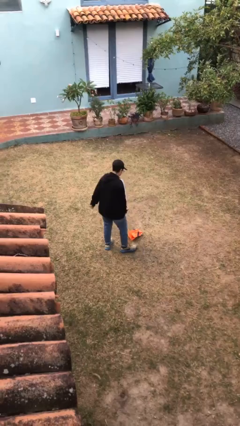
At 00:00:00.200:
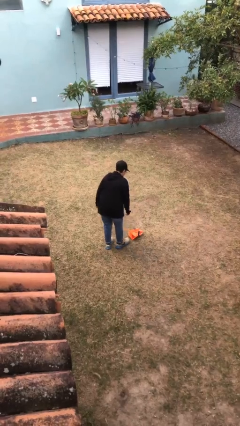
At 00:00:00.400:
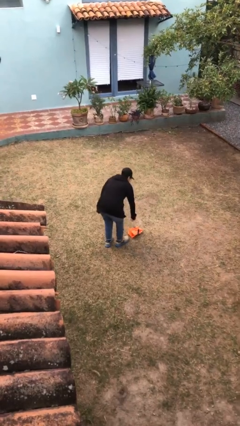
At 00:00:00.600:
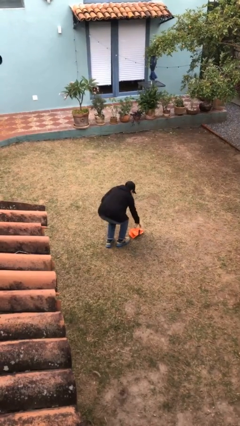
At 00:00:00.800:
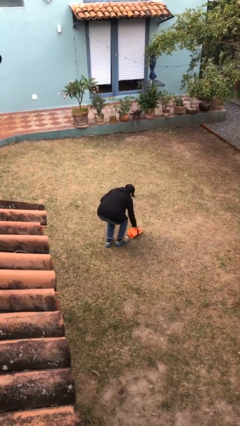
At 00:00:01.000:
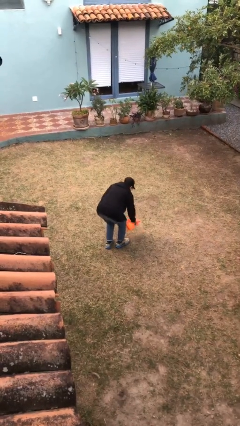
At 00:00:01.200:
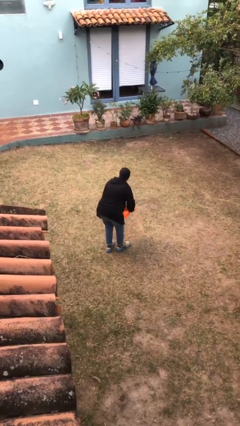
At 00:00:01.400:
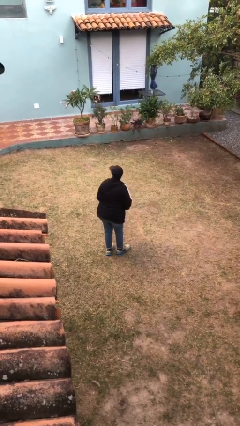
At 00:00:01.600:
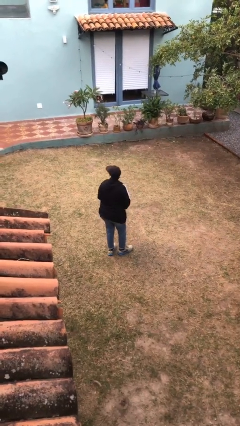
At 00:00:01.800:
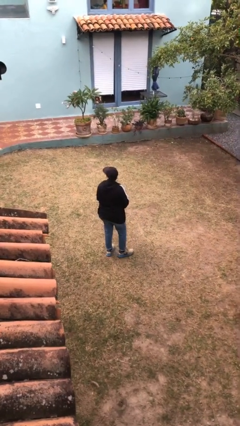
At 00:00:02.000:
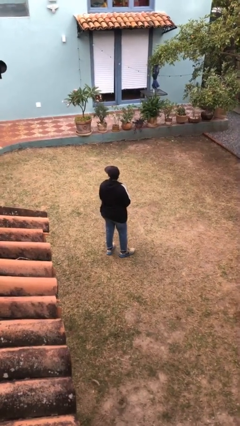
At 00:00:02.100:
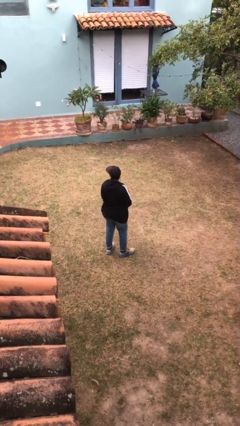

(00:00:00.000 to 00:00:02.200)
person picks up object from floor

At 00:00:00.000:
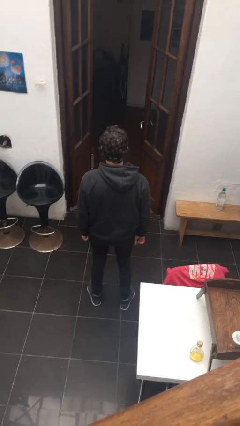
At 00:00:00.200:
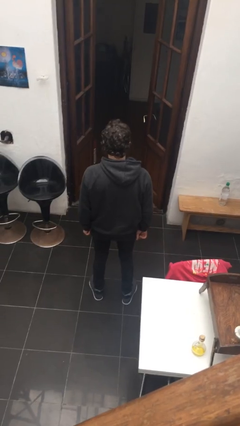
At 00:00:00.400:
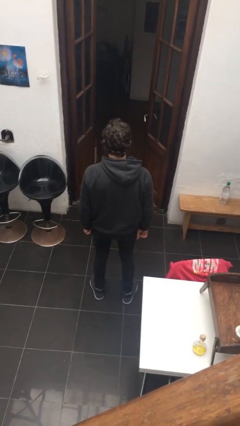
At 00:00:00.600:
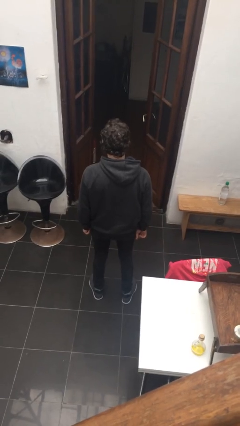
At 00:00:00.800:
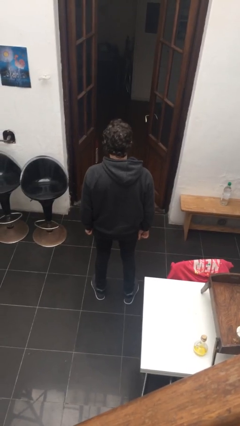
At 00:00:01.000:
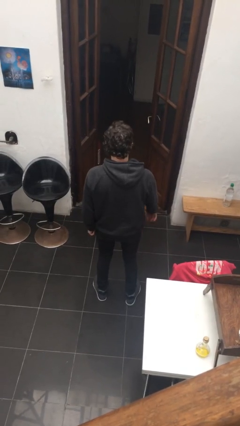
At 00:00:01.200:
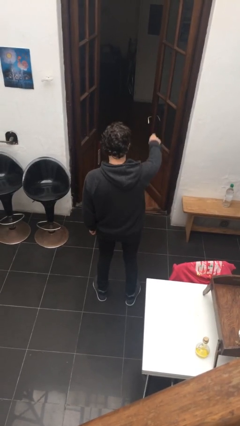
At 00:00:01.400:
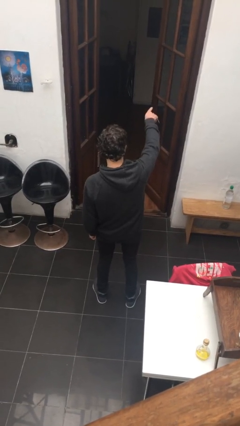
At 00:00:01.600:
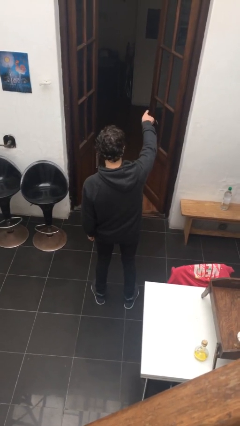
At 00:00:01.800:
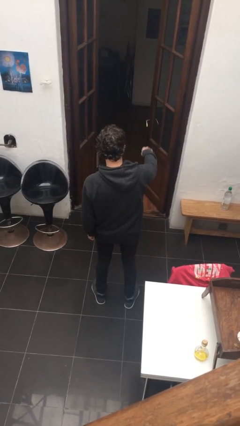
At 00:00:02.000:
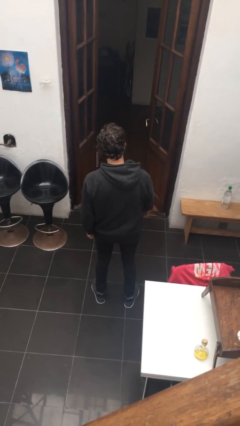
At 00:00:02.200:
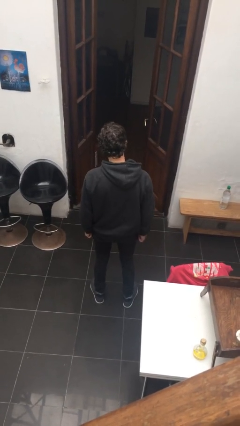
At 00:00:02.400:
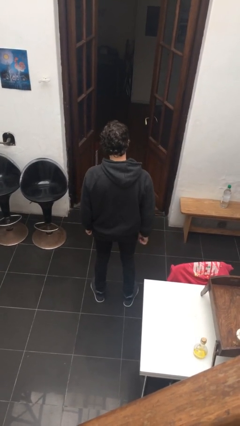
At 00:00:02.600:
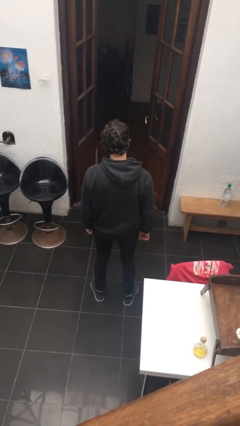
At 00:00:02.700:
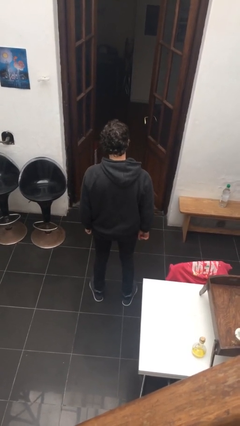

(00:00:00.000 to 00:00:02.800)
person points at person

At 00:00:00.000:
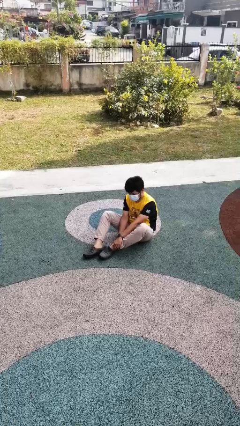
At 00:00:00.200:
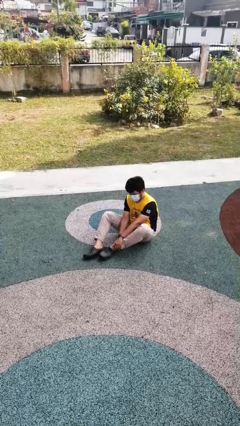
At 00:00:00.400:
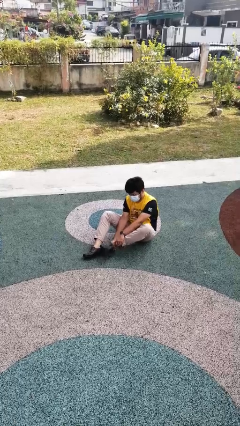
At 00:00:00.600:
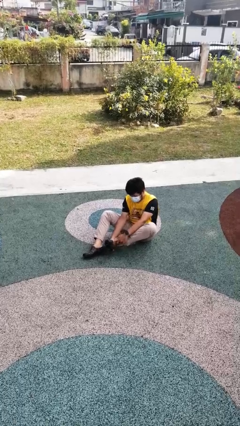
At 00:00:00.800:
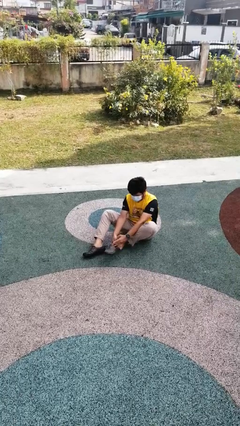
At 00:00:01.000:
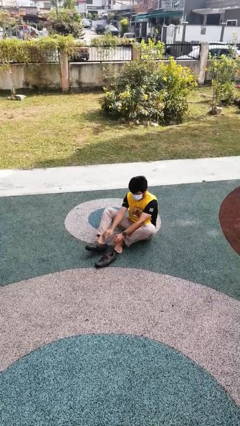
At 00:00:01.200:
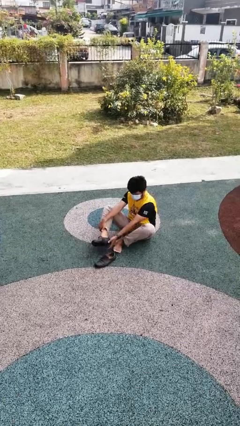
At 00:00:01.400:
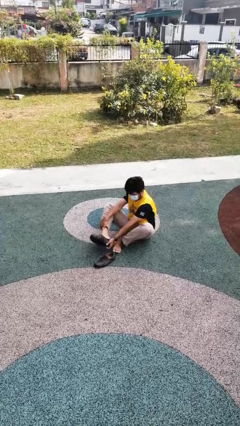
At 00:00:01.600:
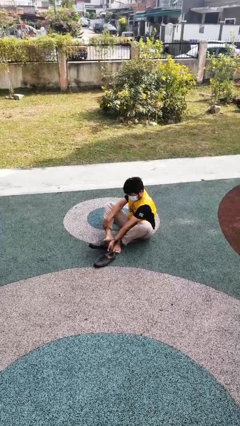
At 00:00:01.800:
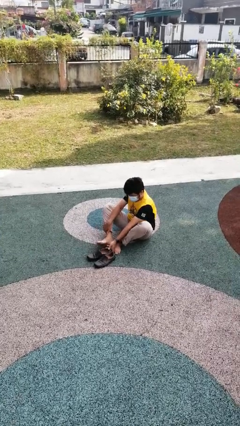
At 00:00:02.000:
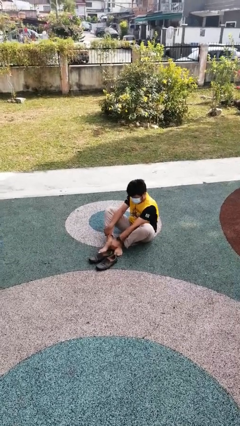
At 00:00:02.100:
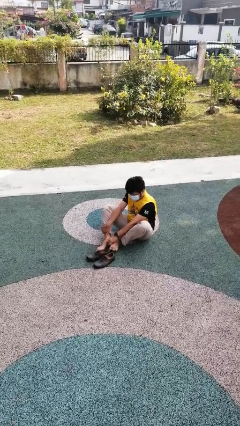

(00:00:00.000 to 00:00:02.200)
person takes off shoes

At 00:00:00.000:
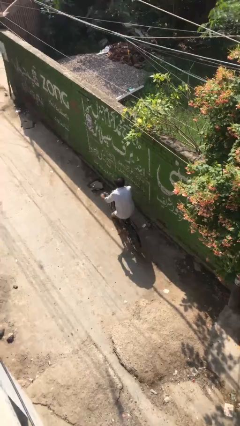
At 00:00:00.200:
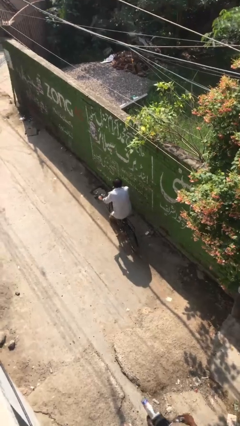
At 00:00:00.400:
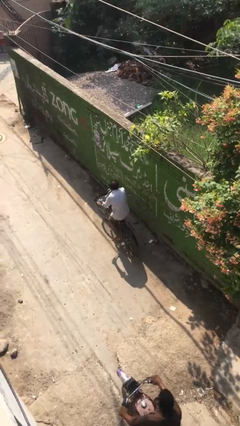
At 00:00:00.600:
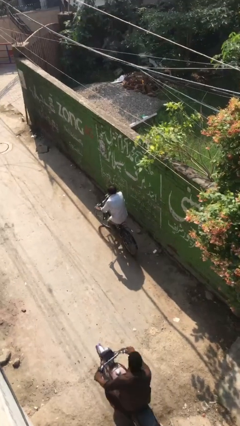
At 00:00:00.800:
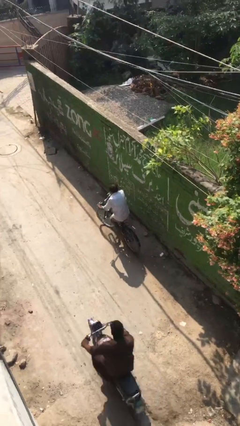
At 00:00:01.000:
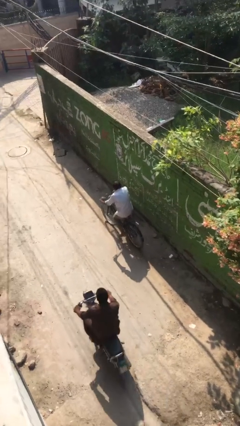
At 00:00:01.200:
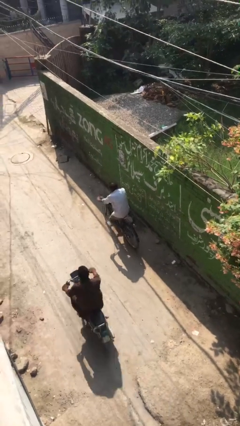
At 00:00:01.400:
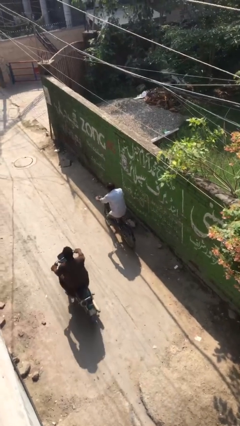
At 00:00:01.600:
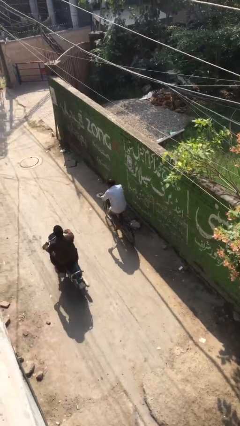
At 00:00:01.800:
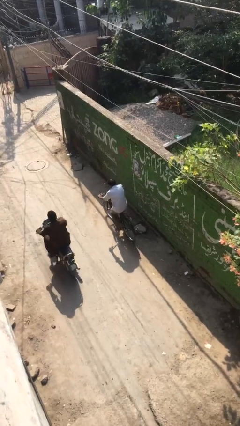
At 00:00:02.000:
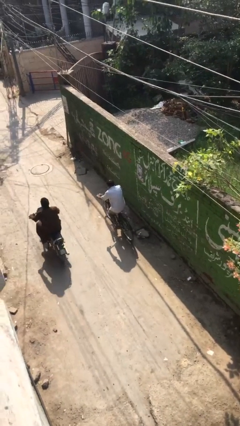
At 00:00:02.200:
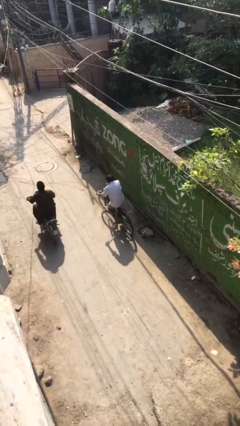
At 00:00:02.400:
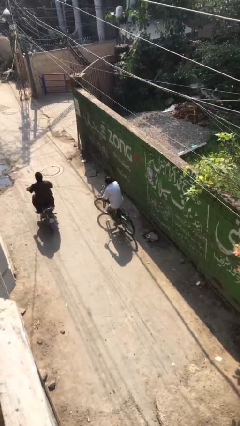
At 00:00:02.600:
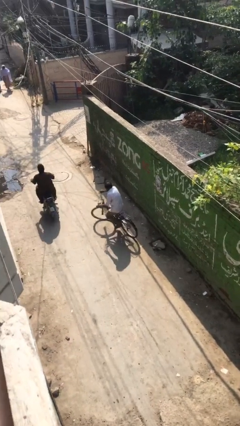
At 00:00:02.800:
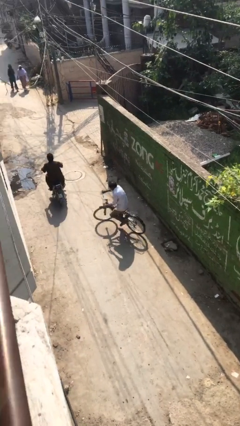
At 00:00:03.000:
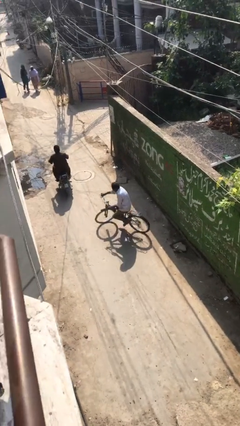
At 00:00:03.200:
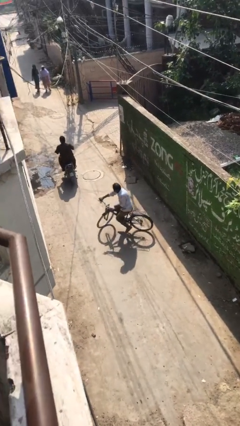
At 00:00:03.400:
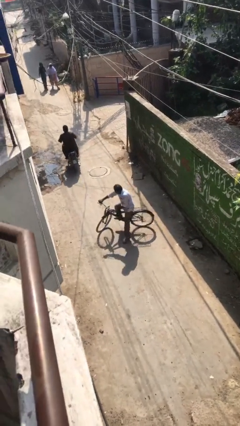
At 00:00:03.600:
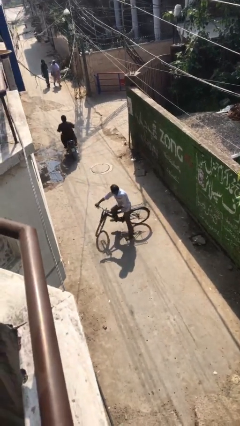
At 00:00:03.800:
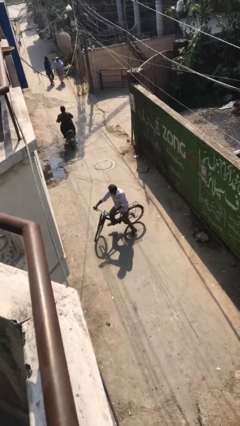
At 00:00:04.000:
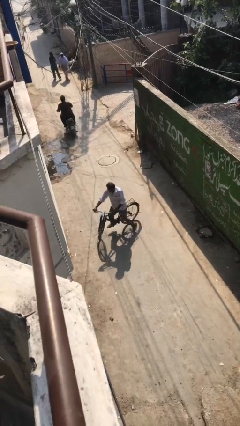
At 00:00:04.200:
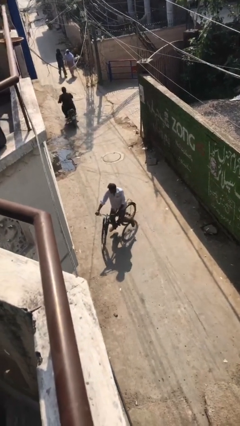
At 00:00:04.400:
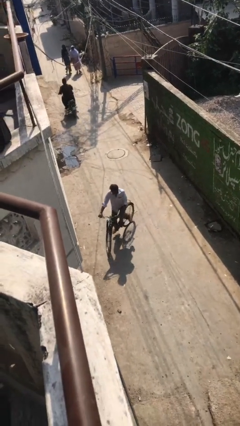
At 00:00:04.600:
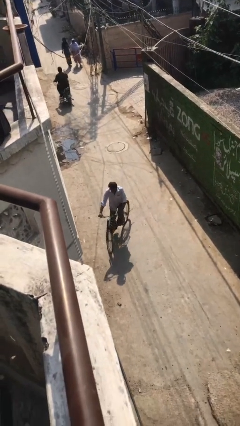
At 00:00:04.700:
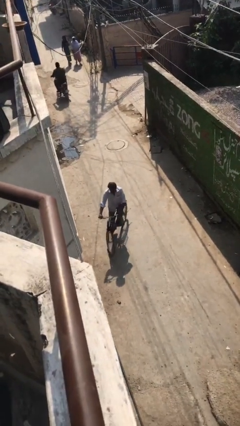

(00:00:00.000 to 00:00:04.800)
person rides bicycle

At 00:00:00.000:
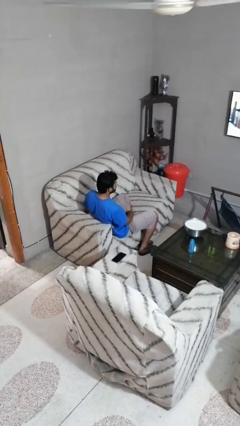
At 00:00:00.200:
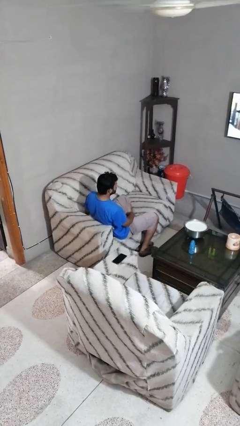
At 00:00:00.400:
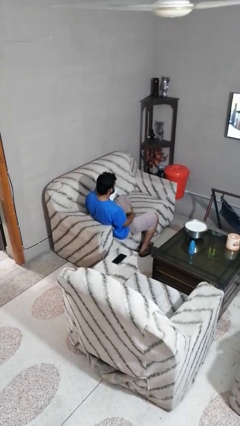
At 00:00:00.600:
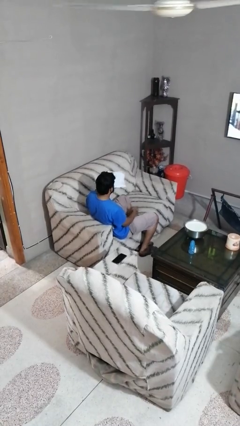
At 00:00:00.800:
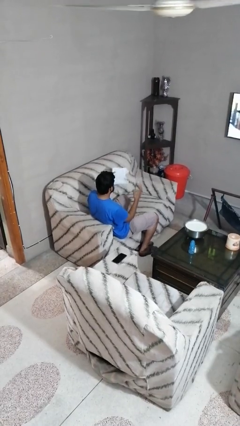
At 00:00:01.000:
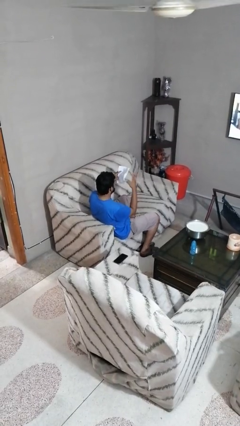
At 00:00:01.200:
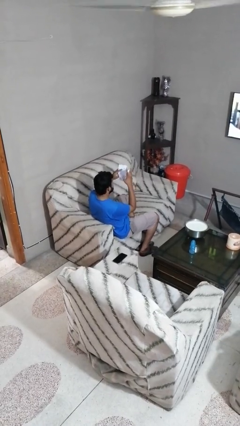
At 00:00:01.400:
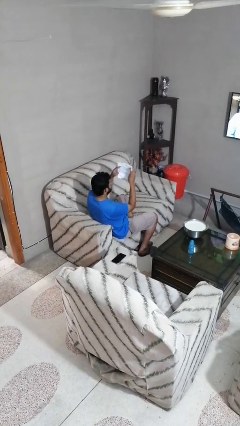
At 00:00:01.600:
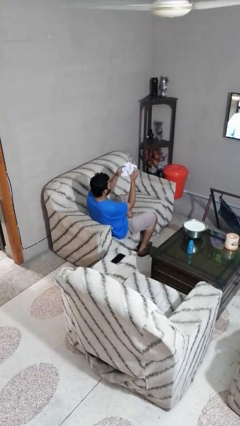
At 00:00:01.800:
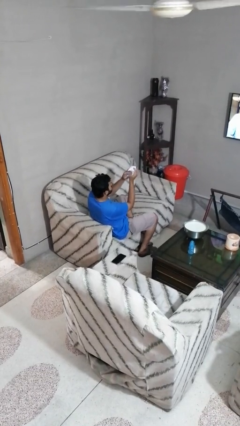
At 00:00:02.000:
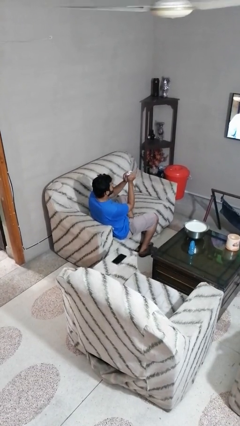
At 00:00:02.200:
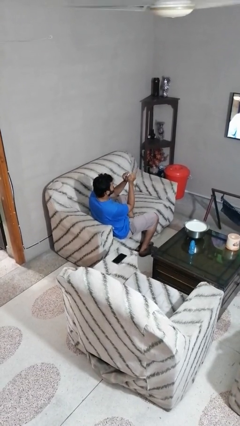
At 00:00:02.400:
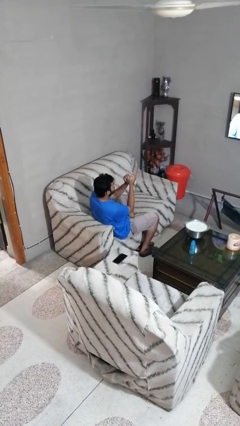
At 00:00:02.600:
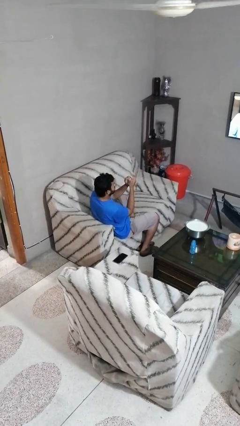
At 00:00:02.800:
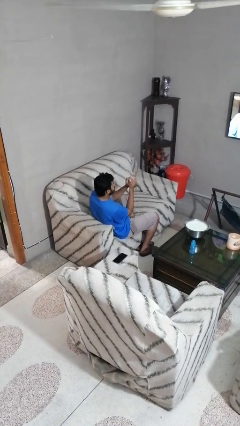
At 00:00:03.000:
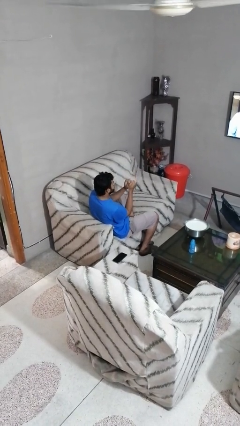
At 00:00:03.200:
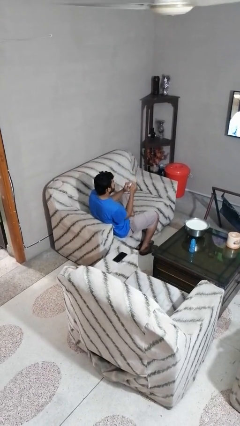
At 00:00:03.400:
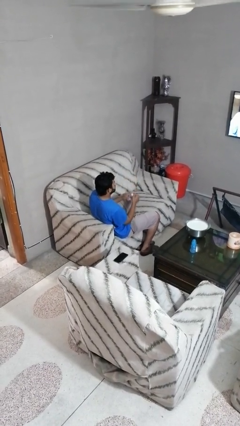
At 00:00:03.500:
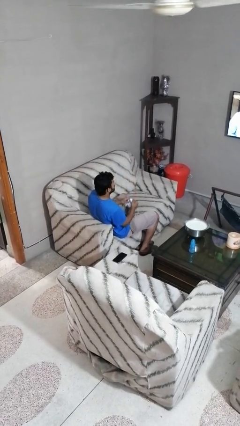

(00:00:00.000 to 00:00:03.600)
person crumples paper

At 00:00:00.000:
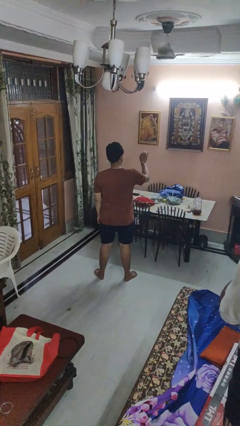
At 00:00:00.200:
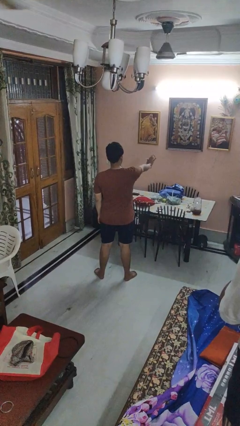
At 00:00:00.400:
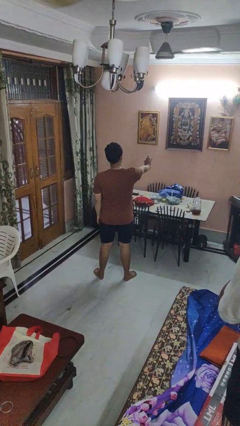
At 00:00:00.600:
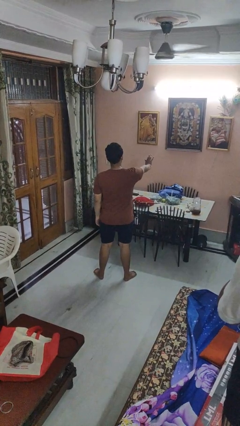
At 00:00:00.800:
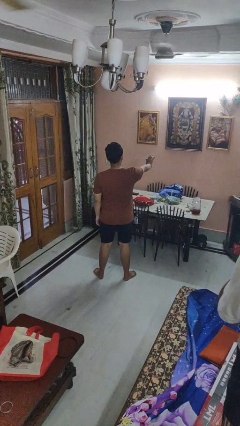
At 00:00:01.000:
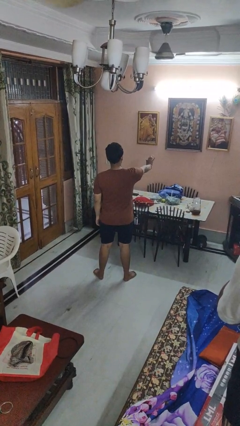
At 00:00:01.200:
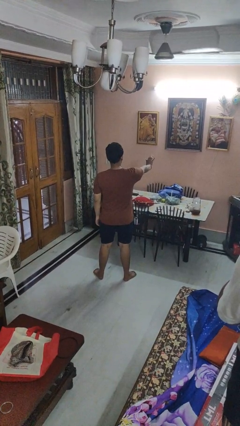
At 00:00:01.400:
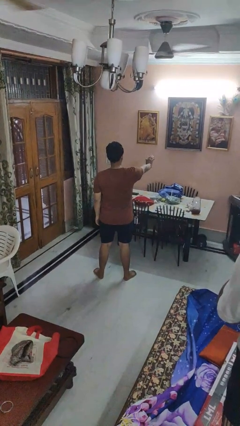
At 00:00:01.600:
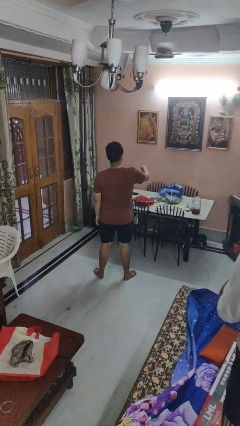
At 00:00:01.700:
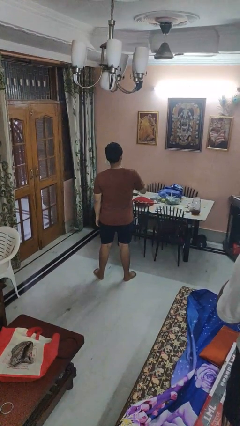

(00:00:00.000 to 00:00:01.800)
person gestures stop
